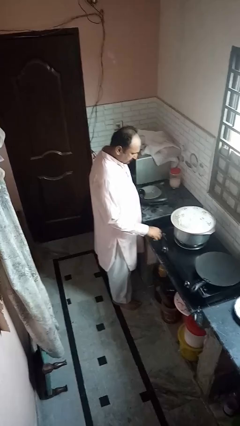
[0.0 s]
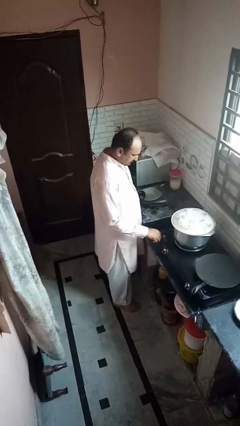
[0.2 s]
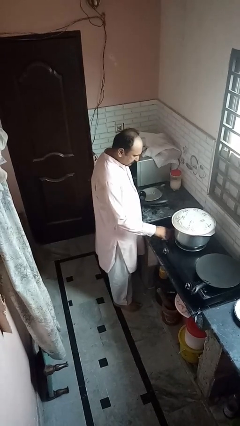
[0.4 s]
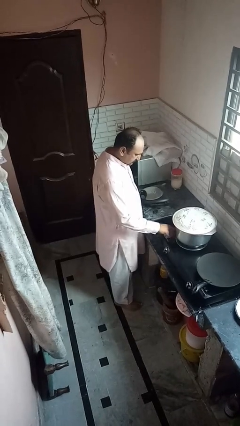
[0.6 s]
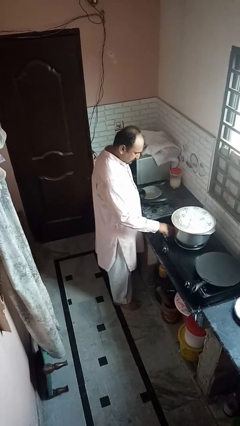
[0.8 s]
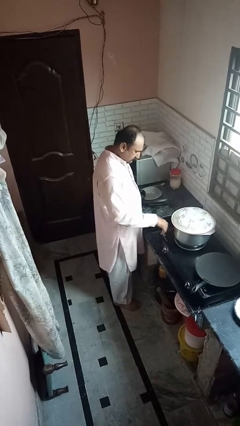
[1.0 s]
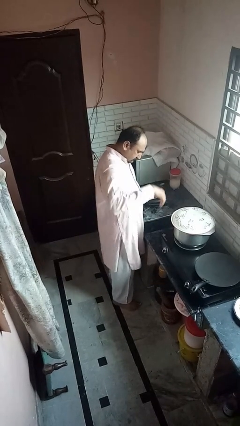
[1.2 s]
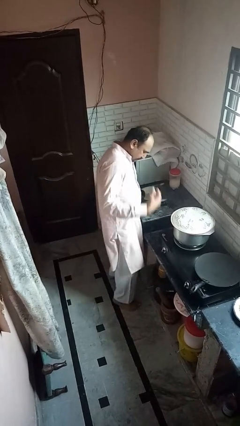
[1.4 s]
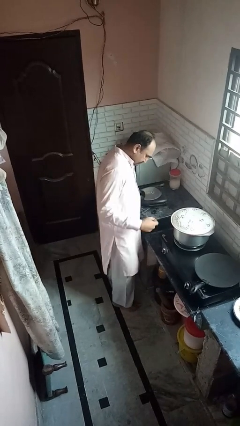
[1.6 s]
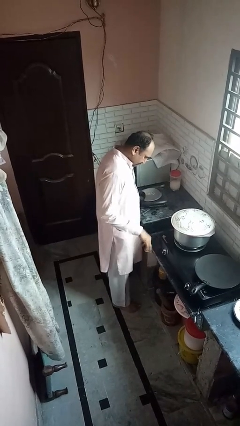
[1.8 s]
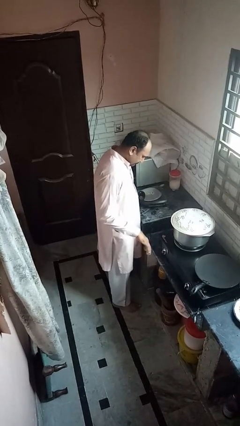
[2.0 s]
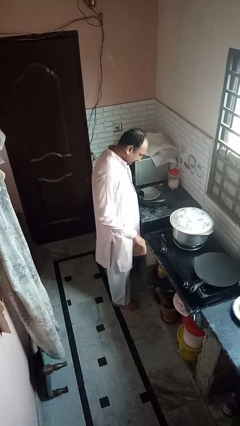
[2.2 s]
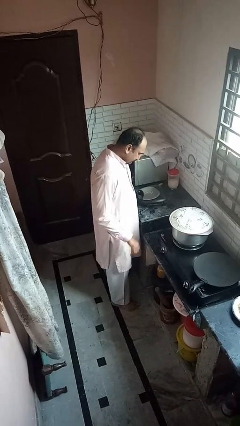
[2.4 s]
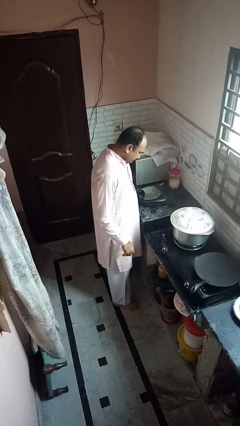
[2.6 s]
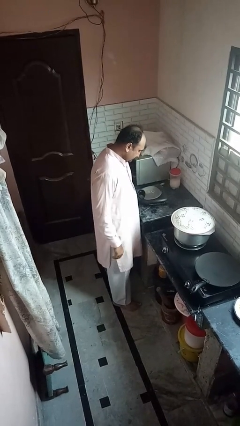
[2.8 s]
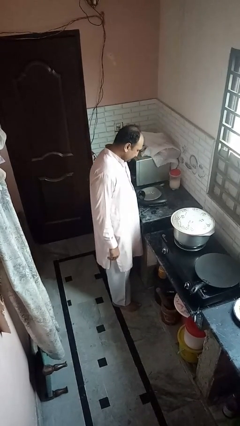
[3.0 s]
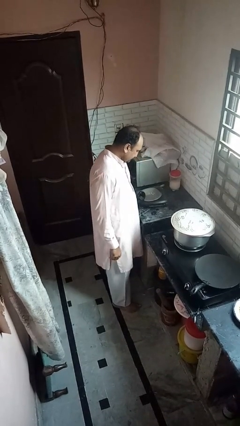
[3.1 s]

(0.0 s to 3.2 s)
person burns hand

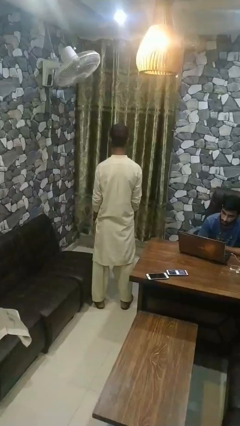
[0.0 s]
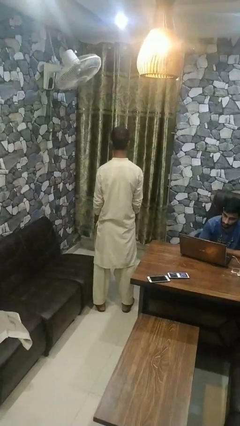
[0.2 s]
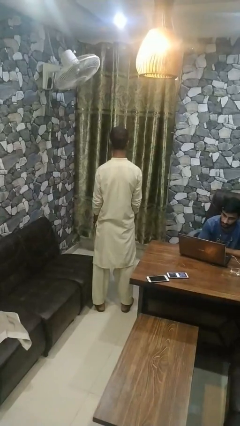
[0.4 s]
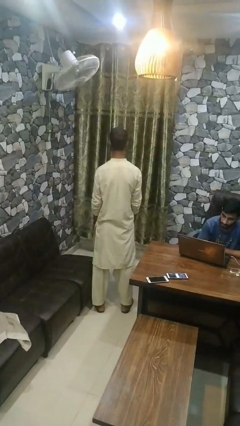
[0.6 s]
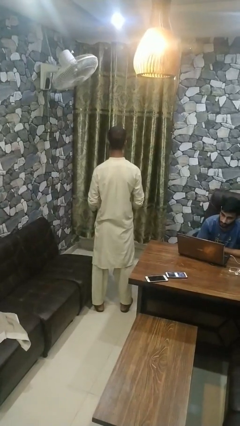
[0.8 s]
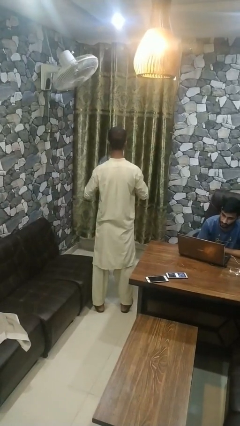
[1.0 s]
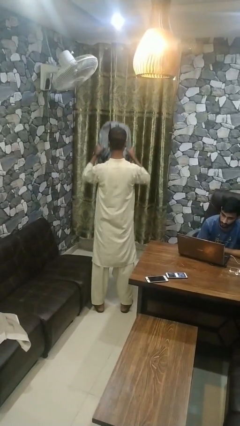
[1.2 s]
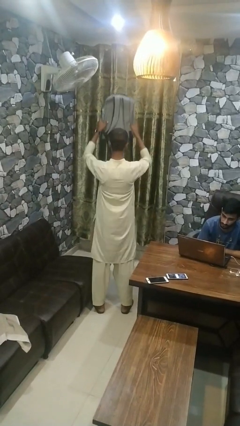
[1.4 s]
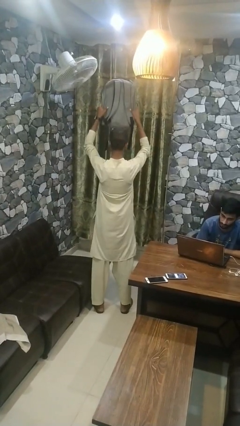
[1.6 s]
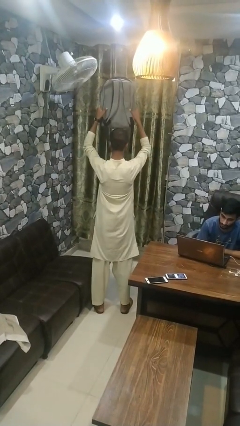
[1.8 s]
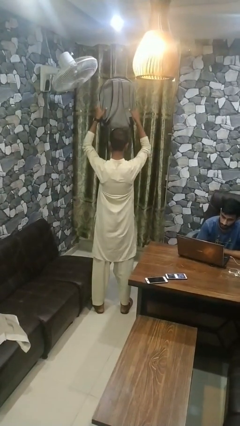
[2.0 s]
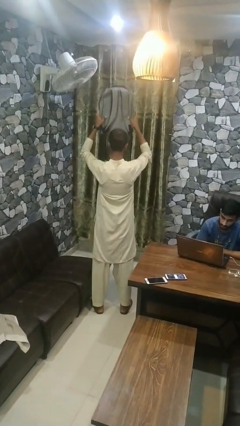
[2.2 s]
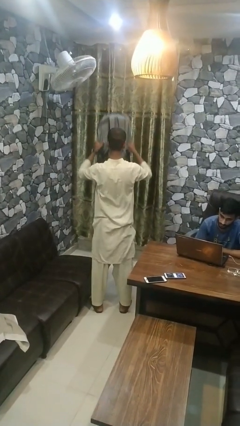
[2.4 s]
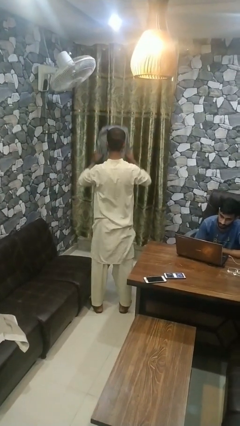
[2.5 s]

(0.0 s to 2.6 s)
person holds object above head

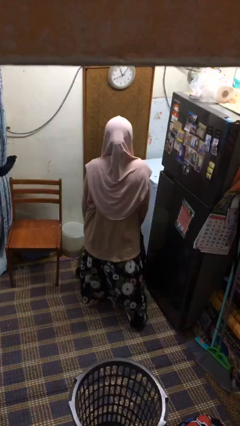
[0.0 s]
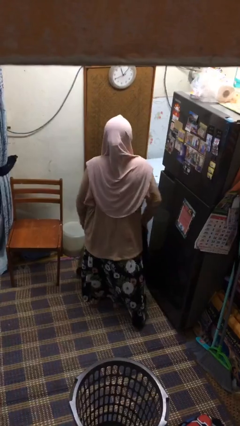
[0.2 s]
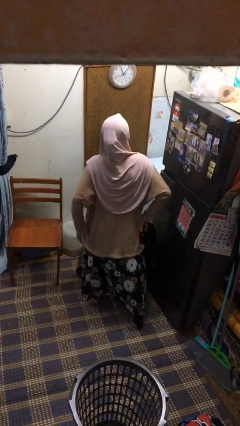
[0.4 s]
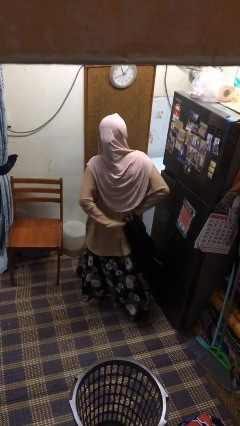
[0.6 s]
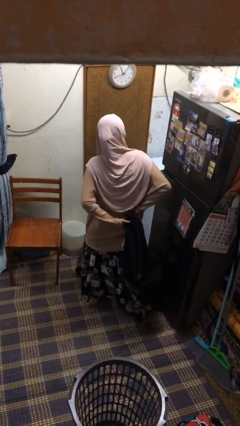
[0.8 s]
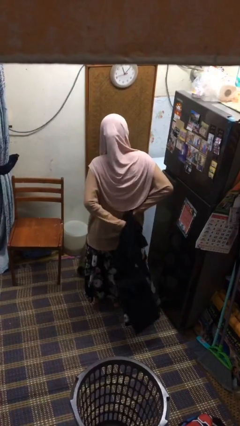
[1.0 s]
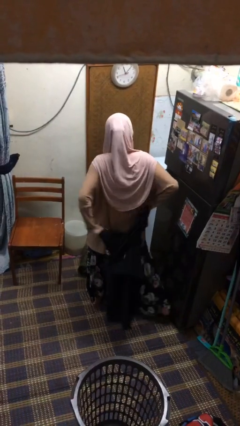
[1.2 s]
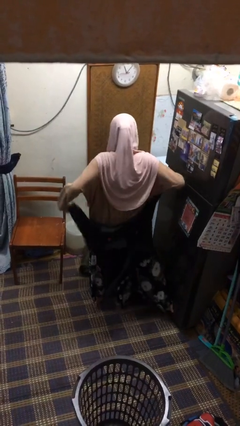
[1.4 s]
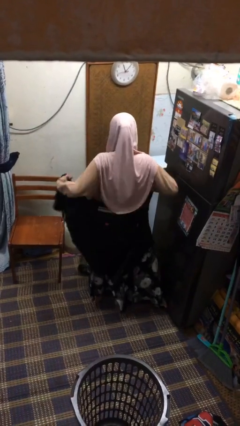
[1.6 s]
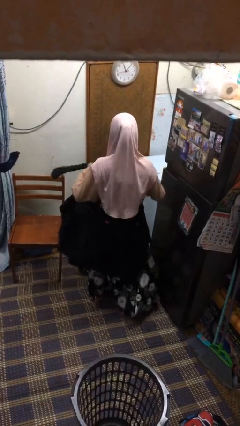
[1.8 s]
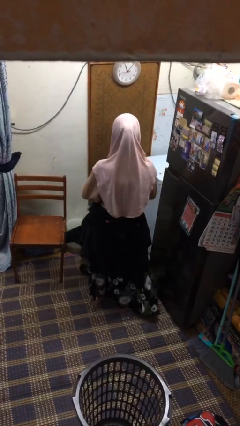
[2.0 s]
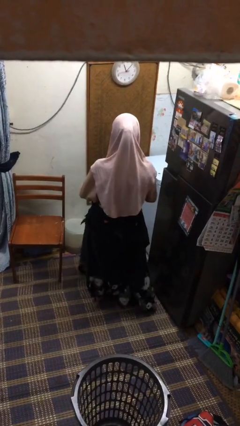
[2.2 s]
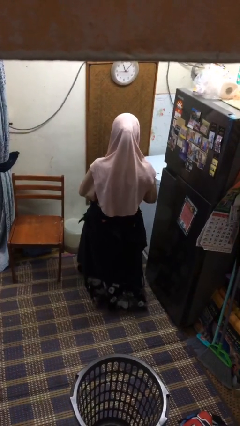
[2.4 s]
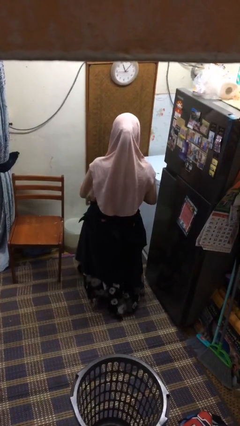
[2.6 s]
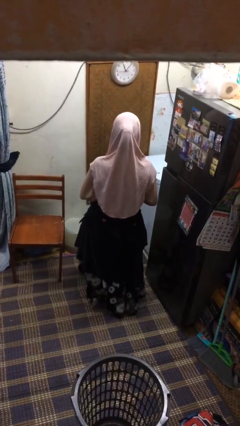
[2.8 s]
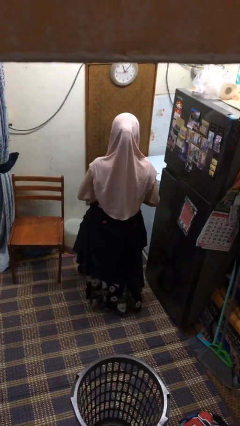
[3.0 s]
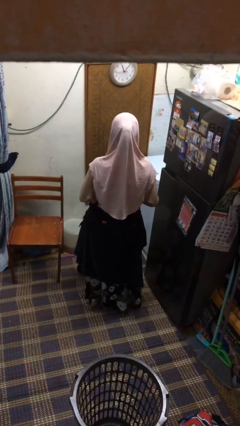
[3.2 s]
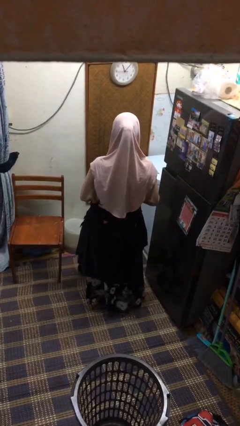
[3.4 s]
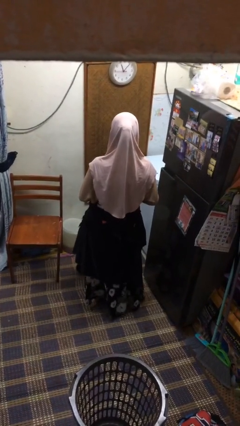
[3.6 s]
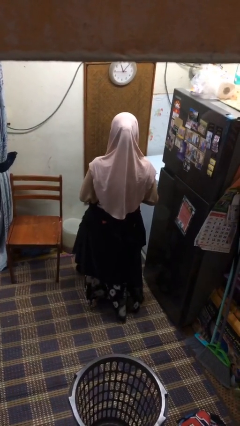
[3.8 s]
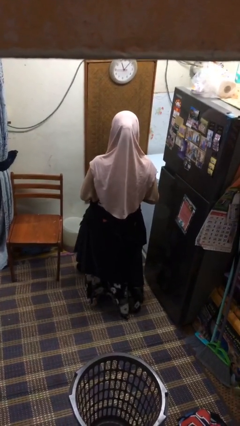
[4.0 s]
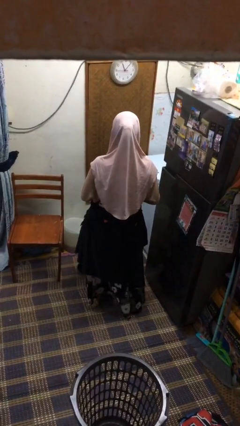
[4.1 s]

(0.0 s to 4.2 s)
person ties jacket around waist

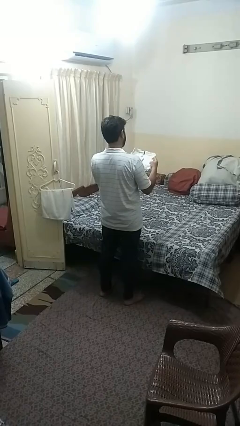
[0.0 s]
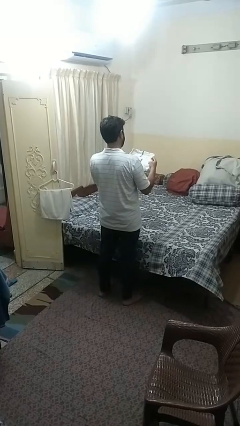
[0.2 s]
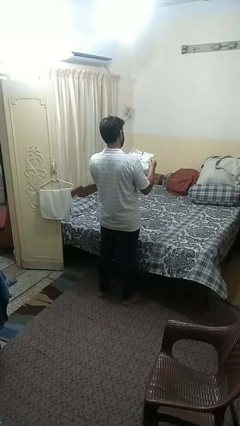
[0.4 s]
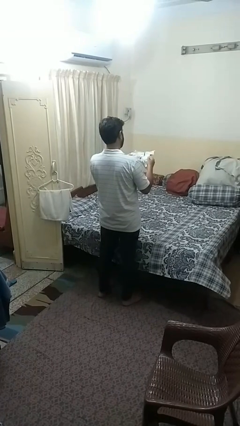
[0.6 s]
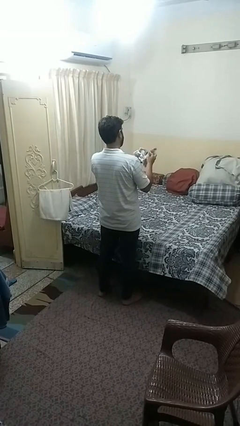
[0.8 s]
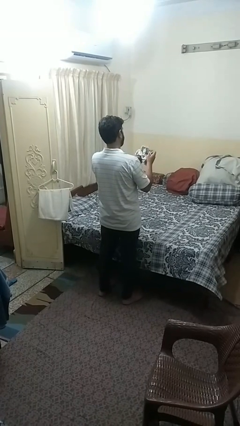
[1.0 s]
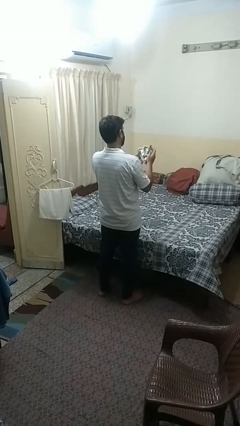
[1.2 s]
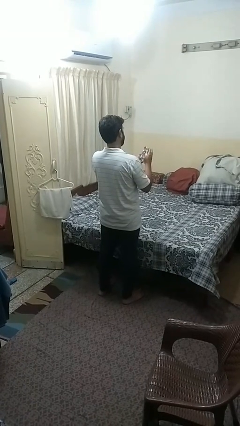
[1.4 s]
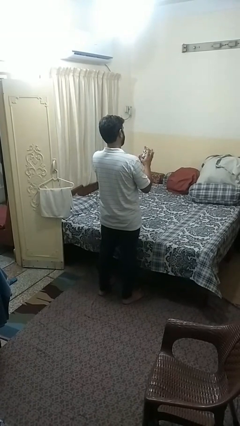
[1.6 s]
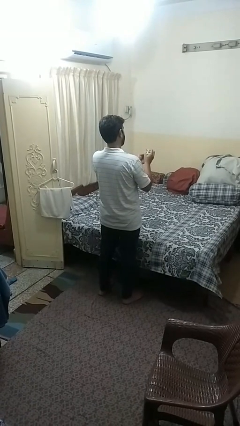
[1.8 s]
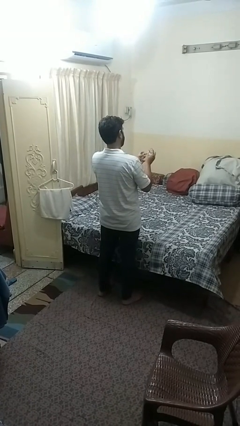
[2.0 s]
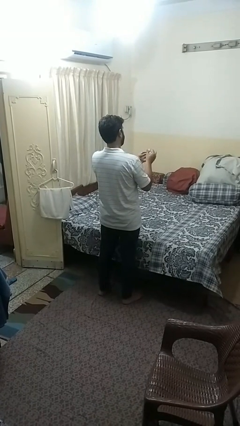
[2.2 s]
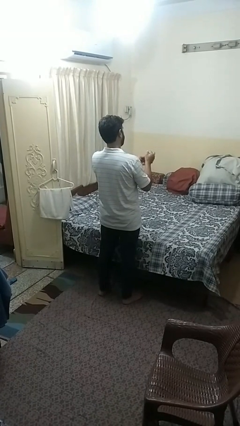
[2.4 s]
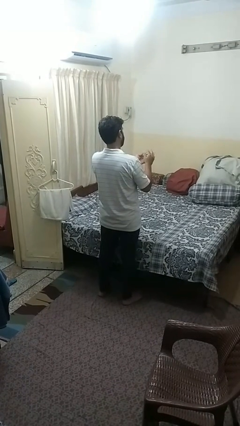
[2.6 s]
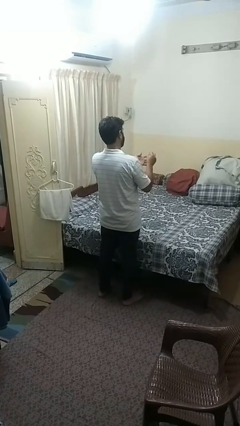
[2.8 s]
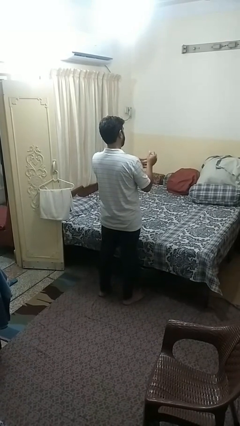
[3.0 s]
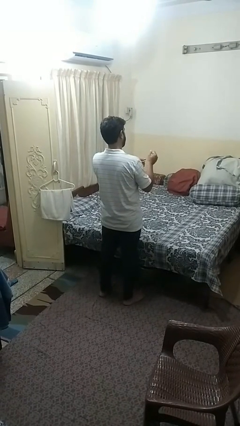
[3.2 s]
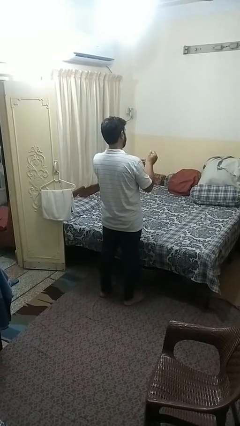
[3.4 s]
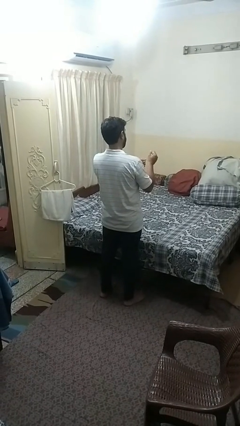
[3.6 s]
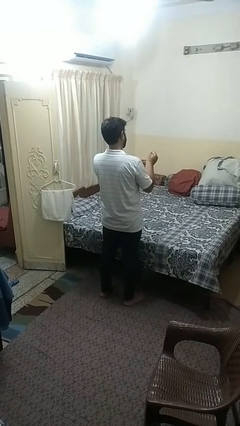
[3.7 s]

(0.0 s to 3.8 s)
person crumples paper

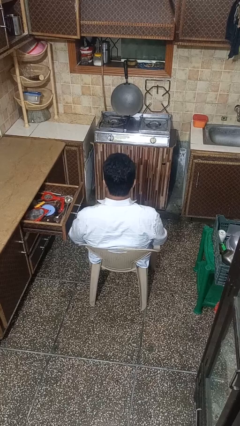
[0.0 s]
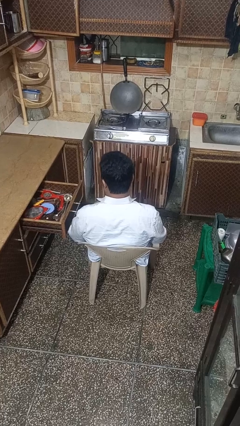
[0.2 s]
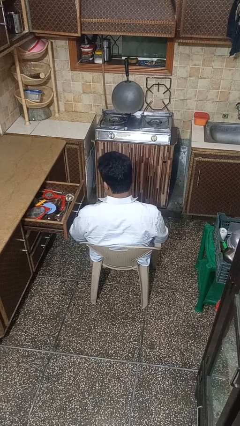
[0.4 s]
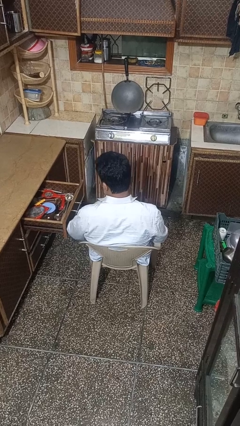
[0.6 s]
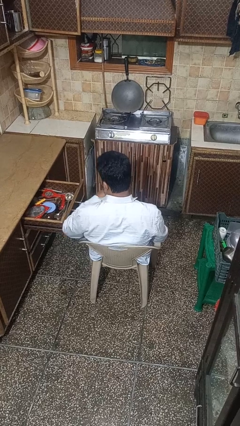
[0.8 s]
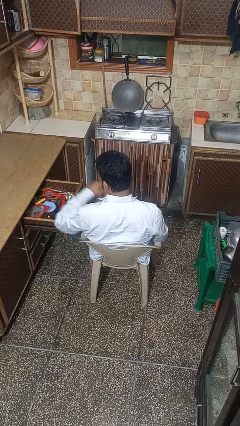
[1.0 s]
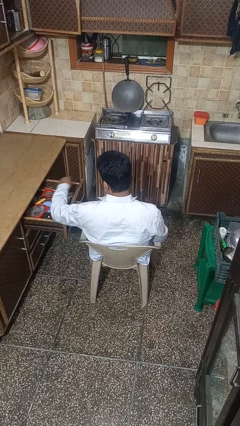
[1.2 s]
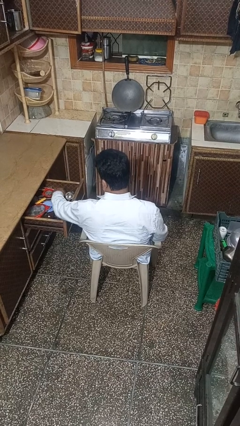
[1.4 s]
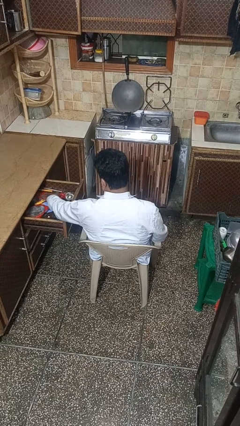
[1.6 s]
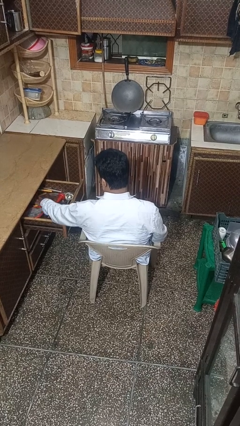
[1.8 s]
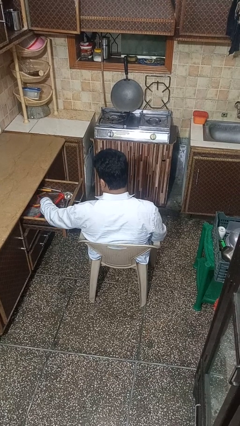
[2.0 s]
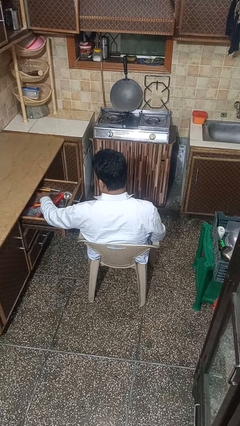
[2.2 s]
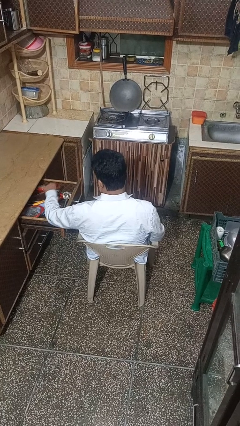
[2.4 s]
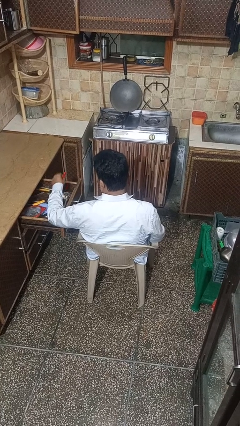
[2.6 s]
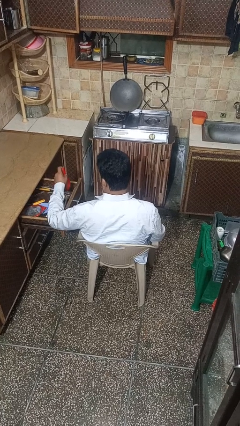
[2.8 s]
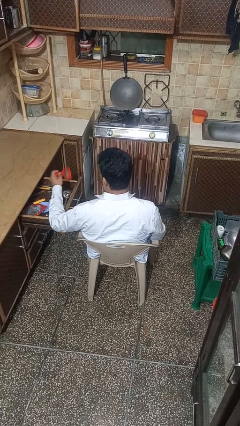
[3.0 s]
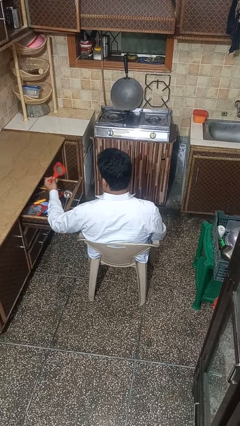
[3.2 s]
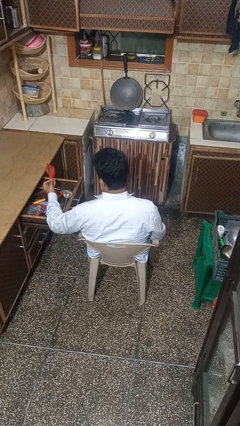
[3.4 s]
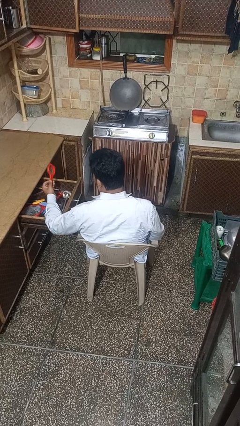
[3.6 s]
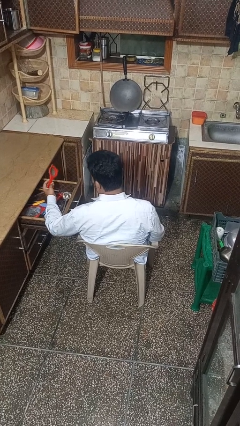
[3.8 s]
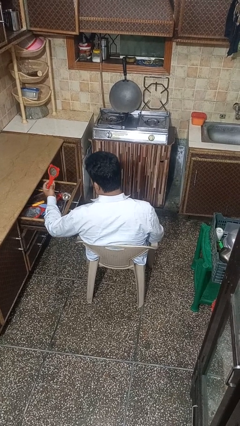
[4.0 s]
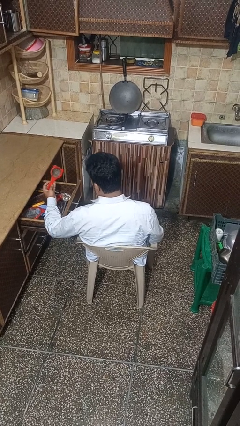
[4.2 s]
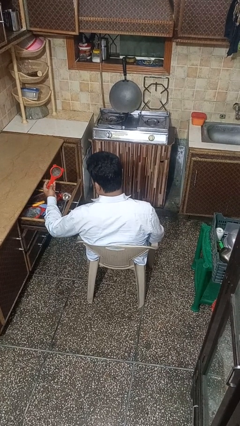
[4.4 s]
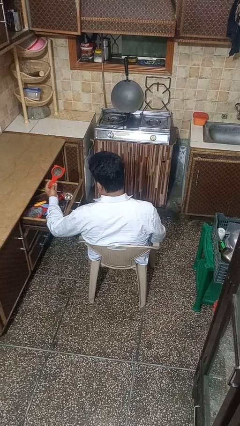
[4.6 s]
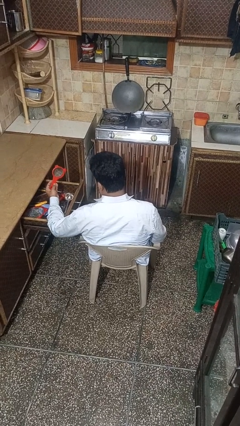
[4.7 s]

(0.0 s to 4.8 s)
person takes object from kitchen drawer
